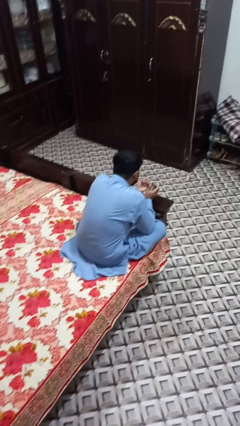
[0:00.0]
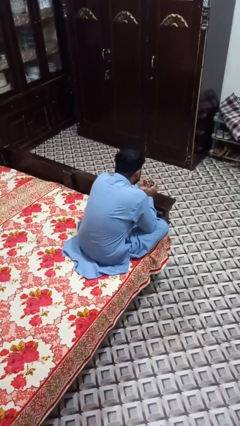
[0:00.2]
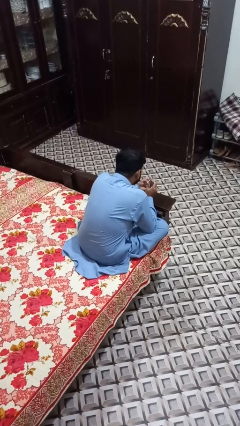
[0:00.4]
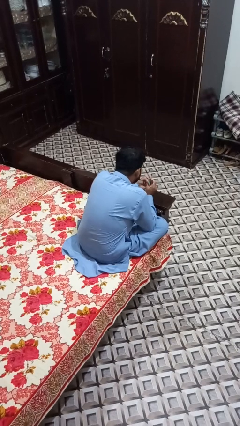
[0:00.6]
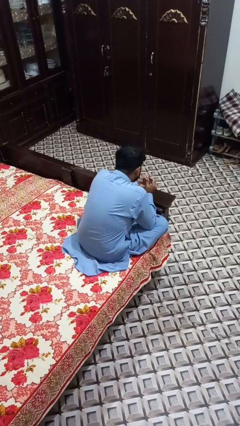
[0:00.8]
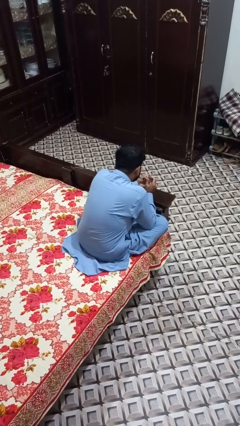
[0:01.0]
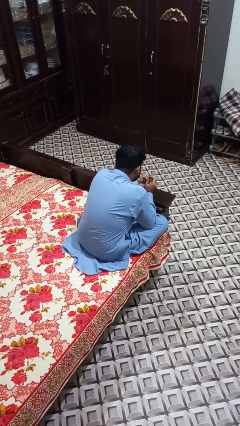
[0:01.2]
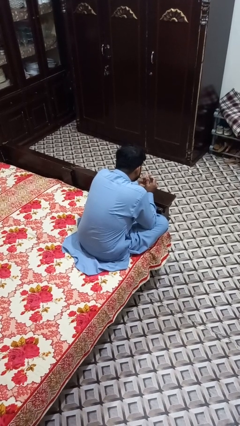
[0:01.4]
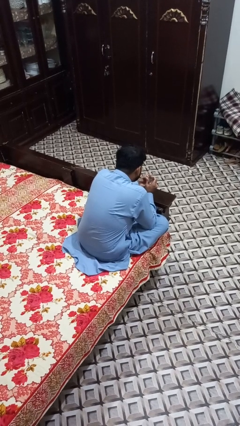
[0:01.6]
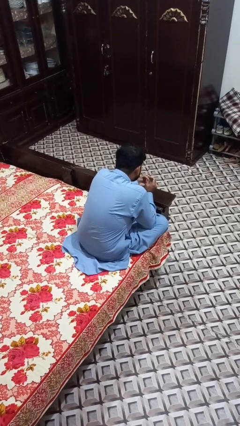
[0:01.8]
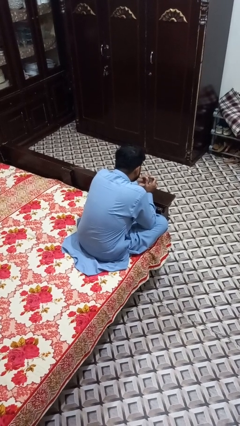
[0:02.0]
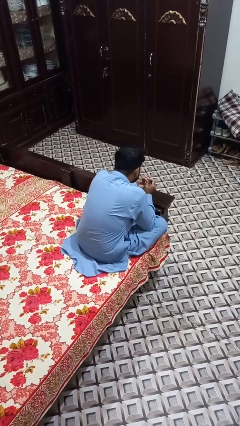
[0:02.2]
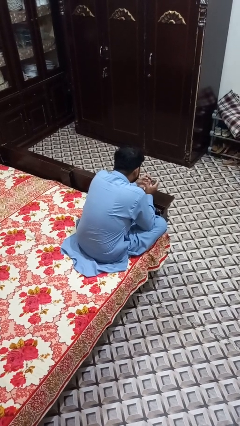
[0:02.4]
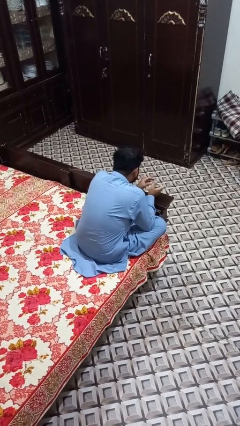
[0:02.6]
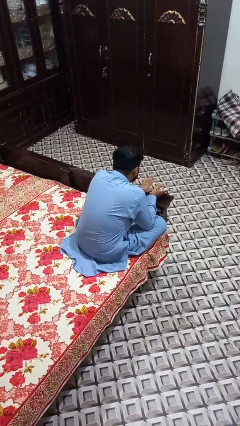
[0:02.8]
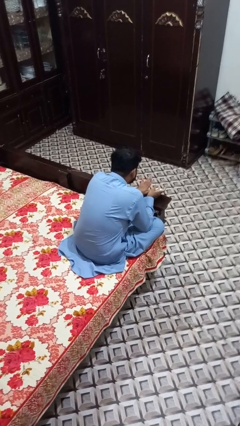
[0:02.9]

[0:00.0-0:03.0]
person clips fingernails

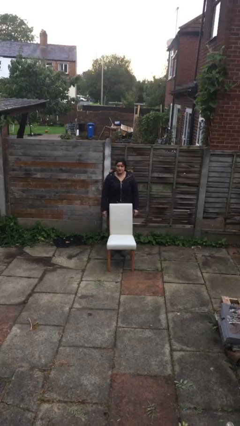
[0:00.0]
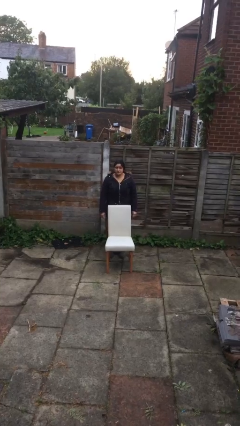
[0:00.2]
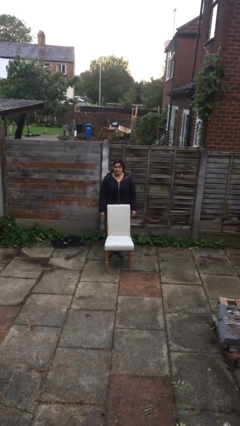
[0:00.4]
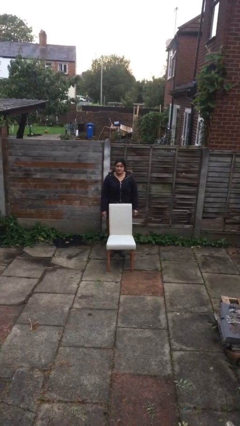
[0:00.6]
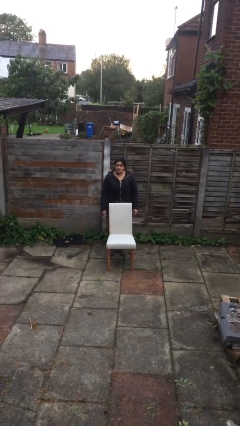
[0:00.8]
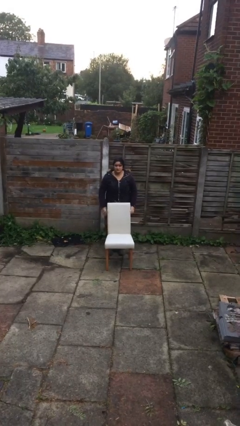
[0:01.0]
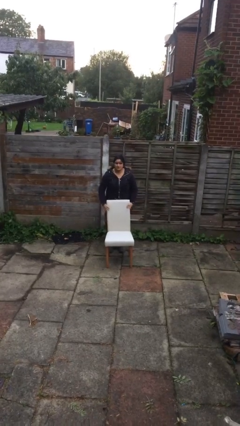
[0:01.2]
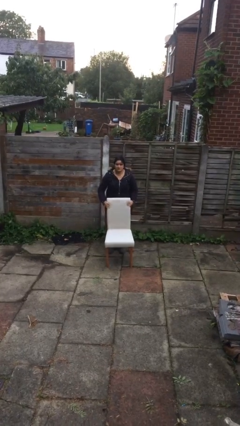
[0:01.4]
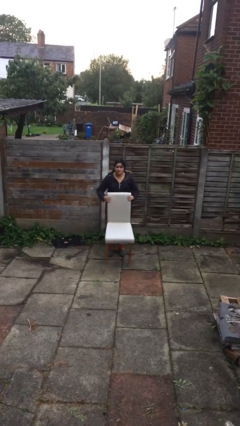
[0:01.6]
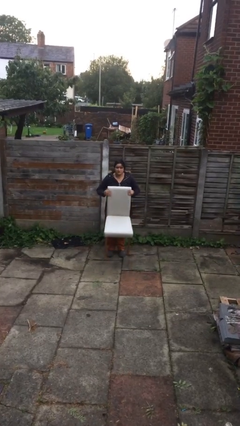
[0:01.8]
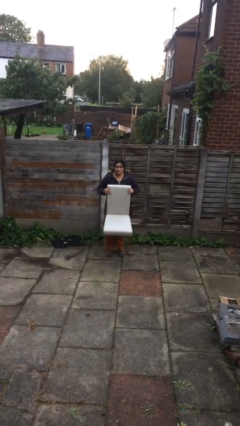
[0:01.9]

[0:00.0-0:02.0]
person picks up object from floor

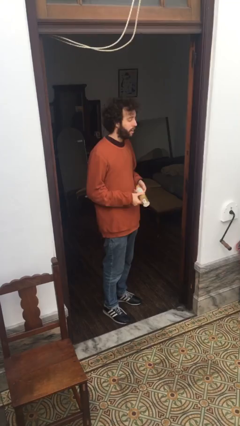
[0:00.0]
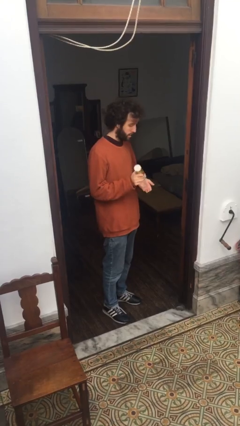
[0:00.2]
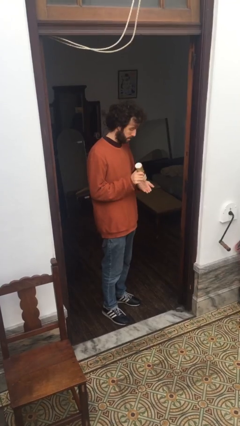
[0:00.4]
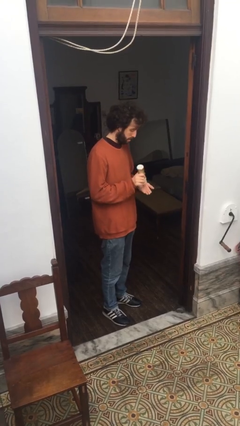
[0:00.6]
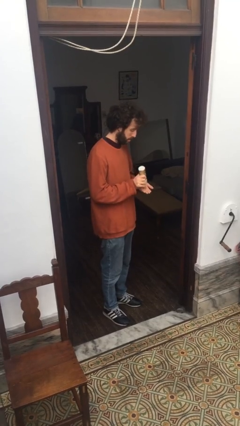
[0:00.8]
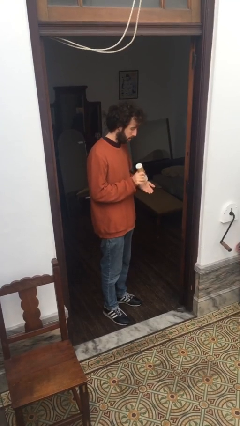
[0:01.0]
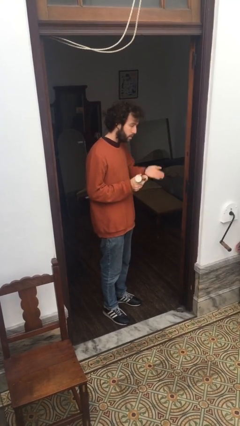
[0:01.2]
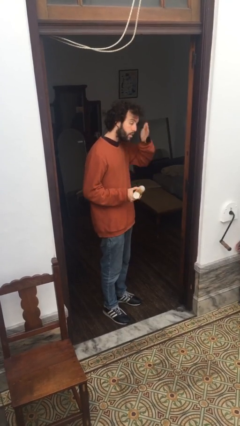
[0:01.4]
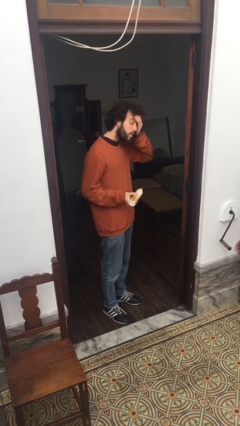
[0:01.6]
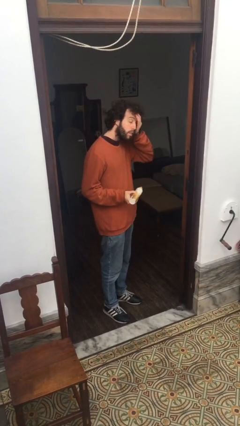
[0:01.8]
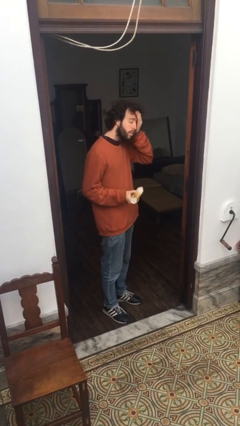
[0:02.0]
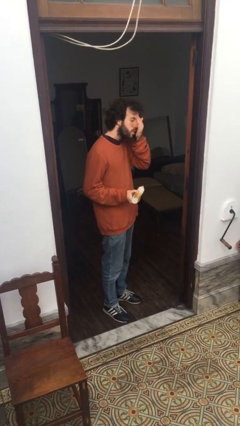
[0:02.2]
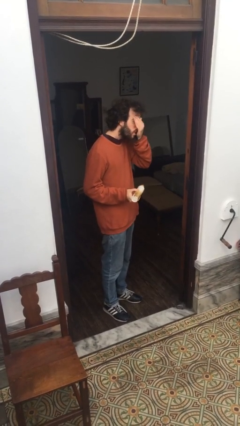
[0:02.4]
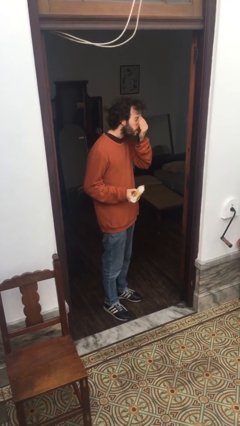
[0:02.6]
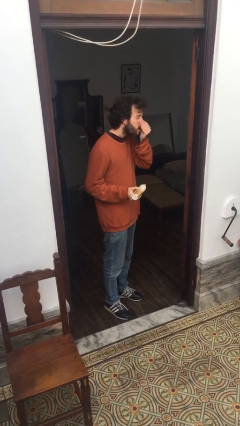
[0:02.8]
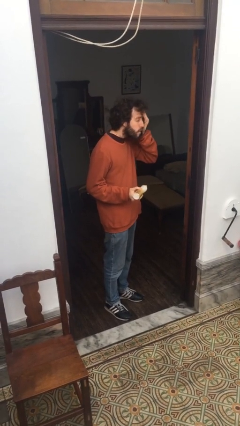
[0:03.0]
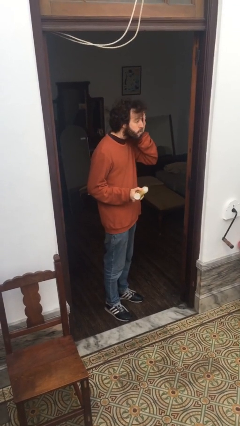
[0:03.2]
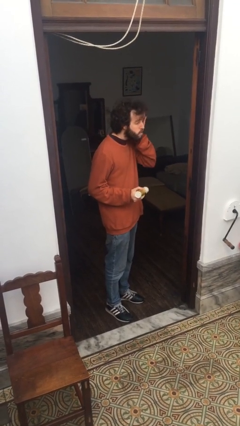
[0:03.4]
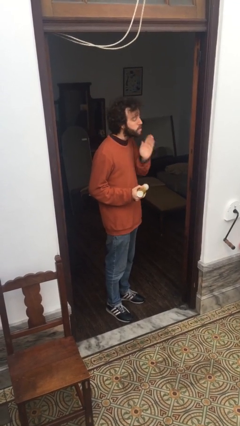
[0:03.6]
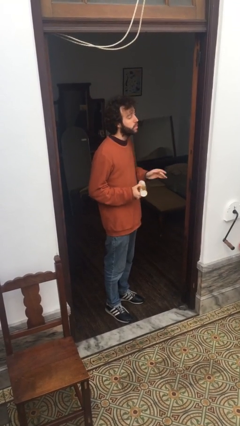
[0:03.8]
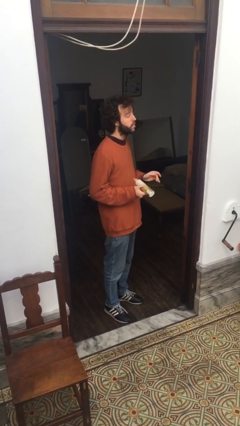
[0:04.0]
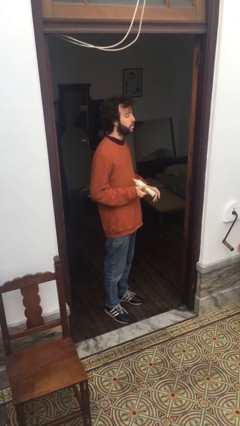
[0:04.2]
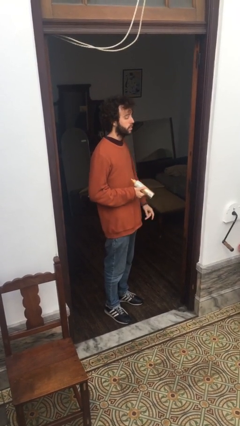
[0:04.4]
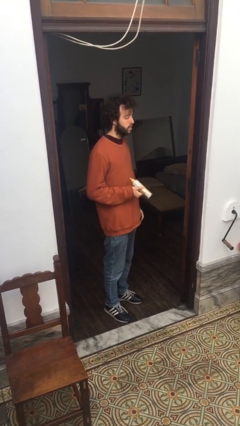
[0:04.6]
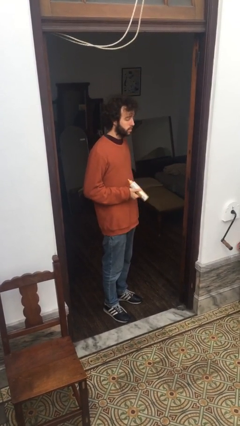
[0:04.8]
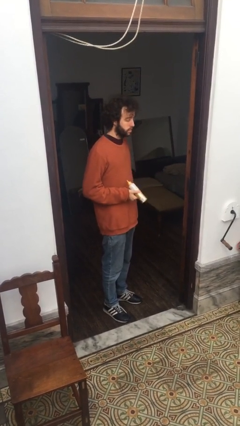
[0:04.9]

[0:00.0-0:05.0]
person applies facial moisturizer

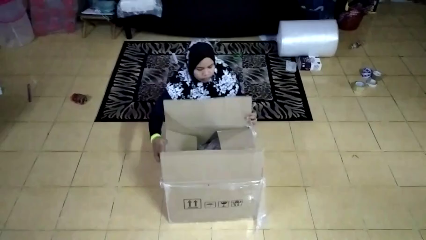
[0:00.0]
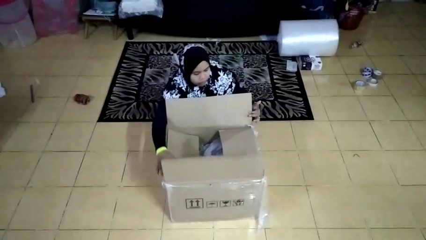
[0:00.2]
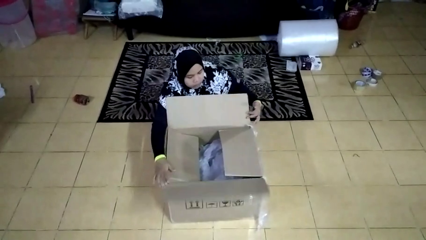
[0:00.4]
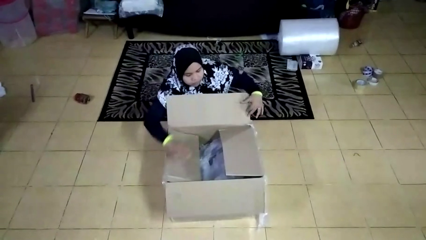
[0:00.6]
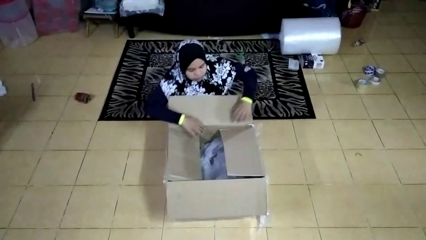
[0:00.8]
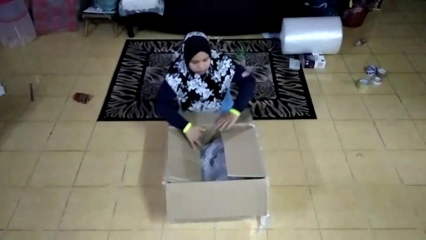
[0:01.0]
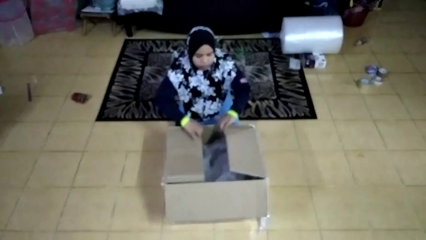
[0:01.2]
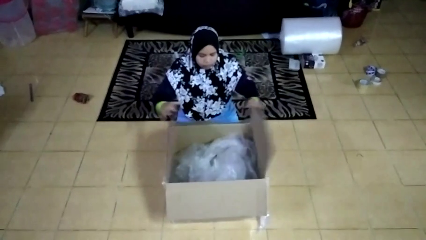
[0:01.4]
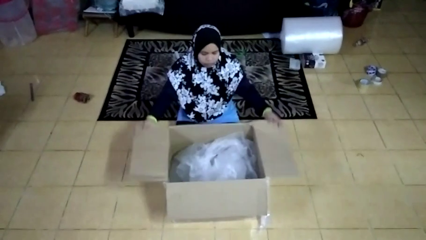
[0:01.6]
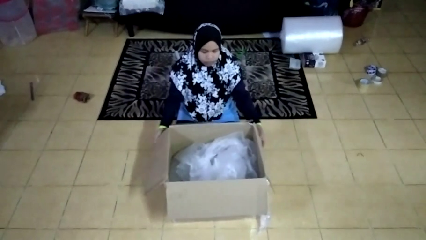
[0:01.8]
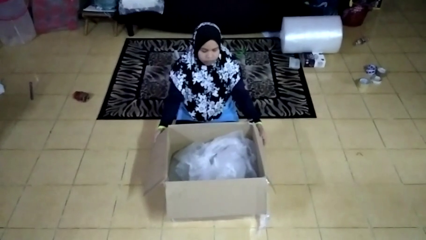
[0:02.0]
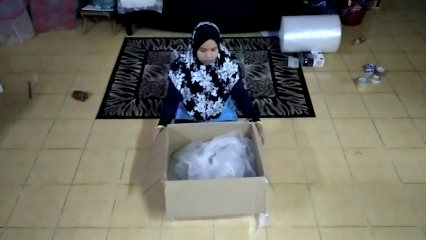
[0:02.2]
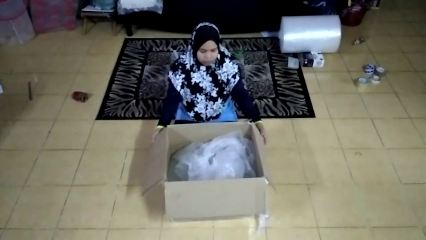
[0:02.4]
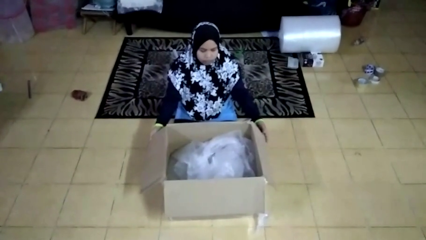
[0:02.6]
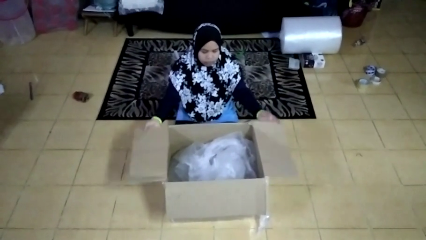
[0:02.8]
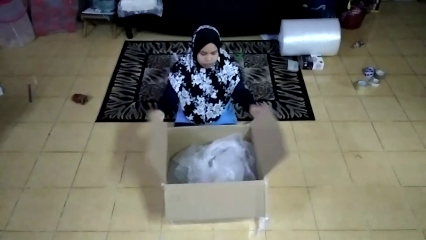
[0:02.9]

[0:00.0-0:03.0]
person opens box

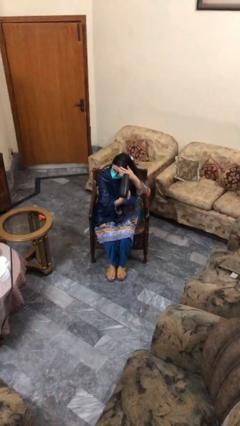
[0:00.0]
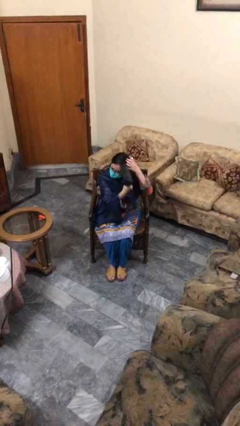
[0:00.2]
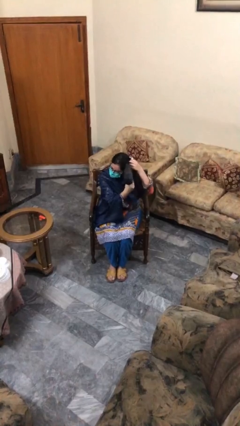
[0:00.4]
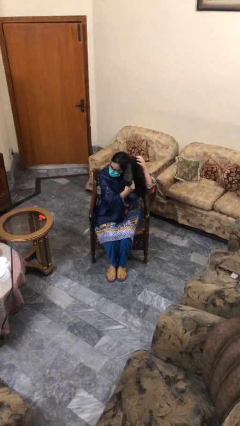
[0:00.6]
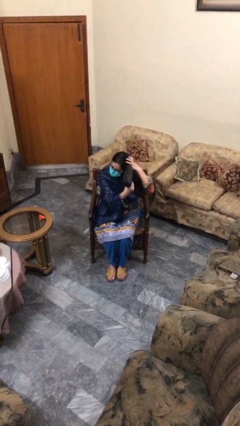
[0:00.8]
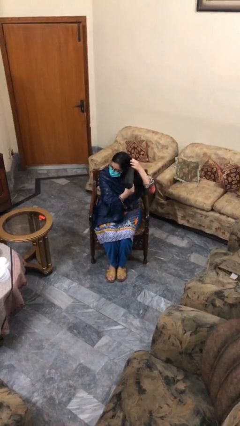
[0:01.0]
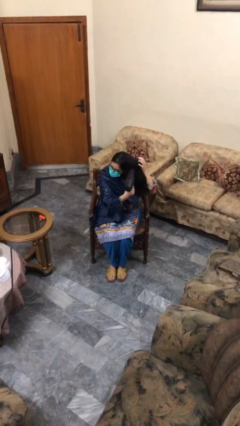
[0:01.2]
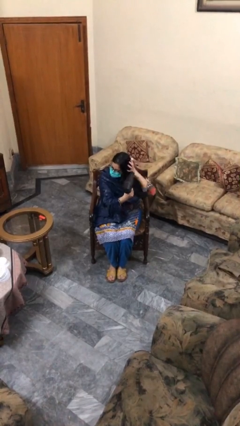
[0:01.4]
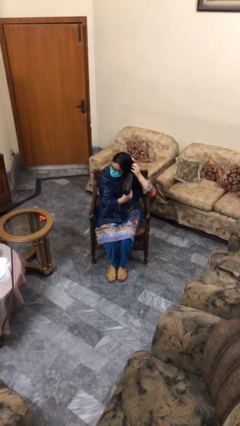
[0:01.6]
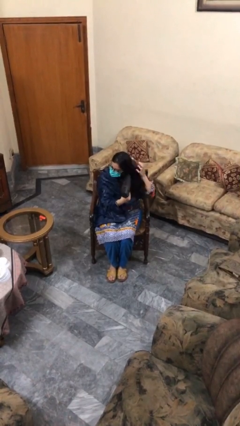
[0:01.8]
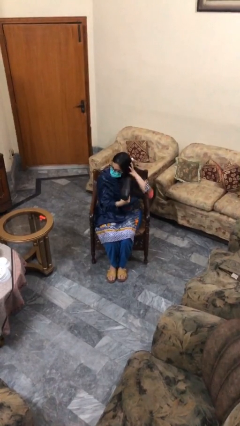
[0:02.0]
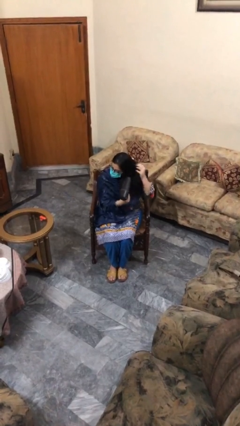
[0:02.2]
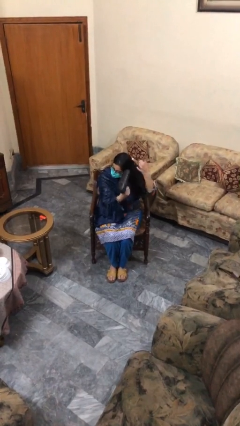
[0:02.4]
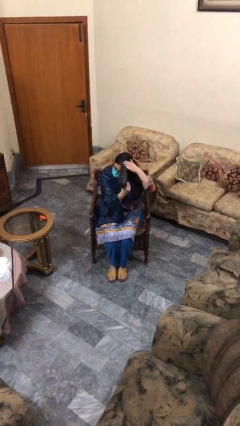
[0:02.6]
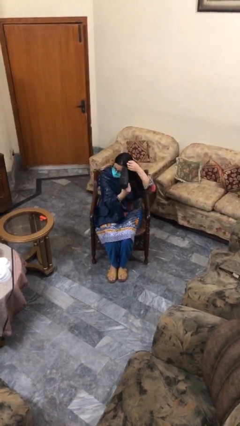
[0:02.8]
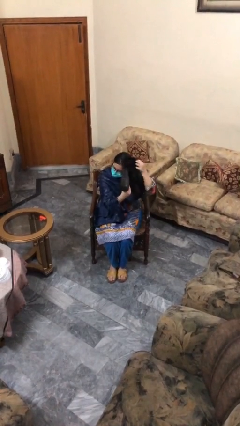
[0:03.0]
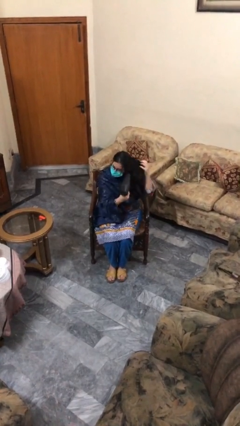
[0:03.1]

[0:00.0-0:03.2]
person dries hair with hairdryer

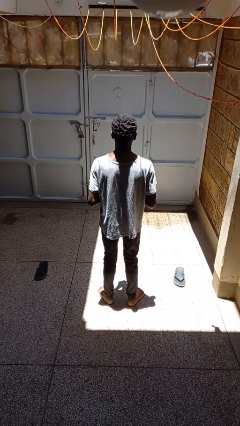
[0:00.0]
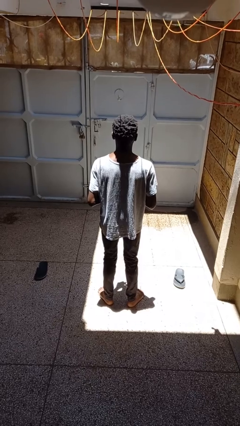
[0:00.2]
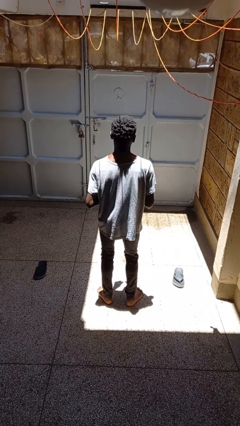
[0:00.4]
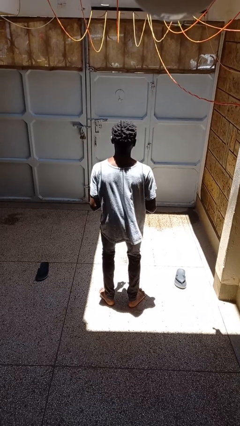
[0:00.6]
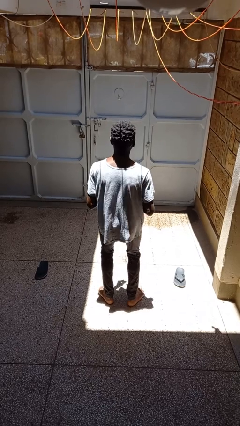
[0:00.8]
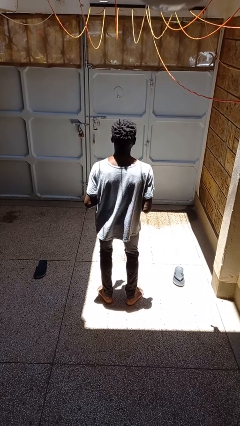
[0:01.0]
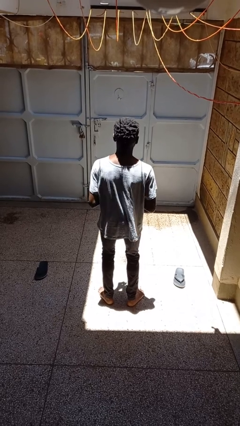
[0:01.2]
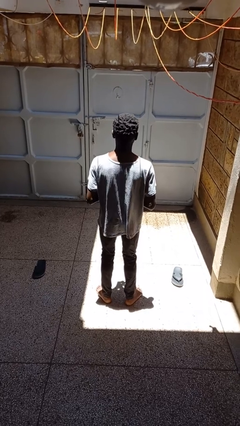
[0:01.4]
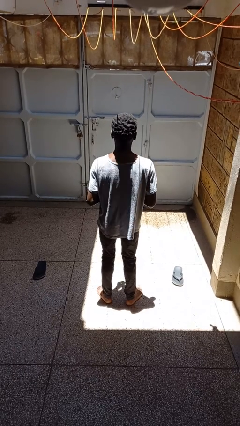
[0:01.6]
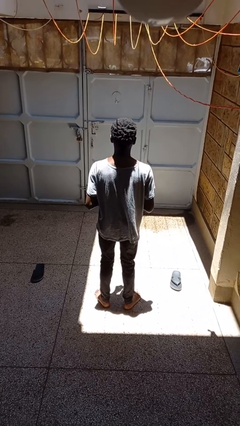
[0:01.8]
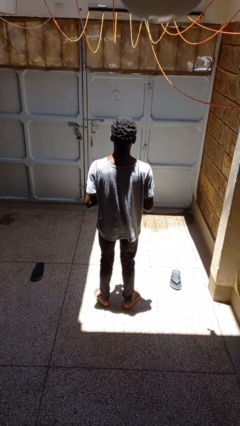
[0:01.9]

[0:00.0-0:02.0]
person dances in place
